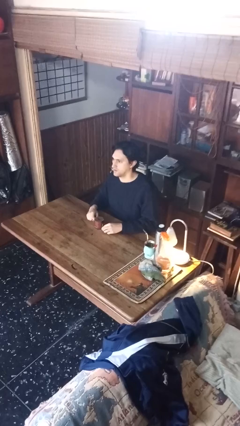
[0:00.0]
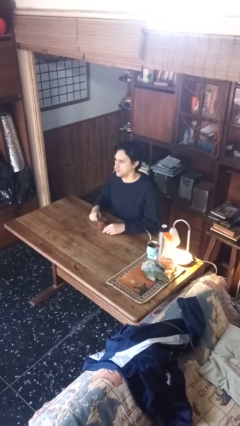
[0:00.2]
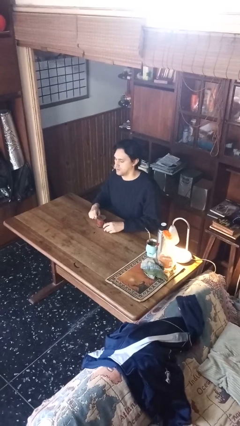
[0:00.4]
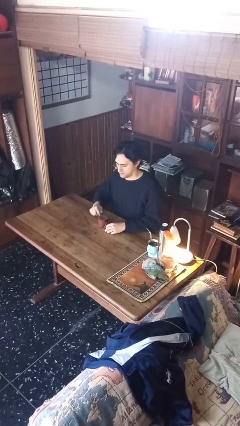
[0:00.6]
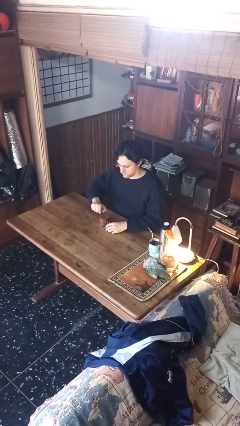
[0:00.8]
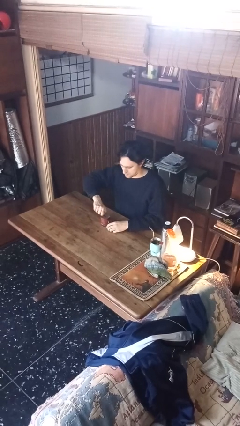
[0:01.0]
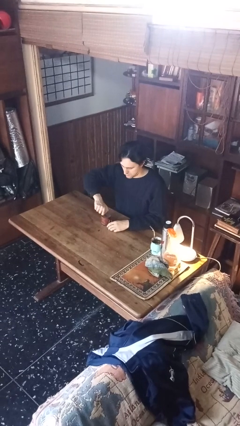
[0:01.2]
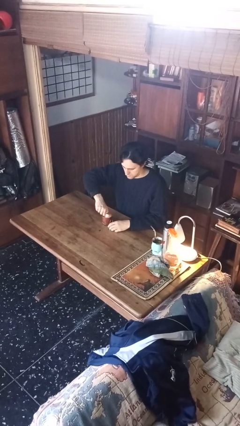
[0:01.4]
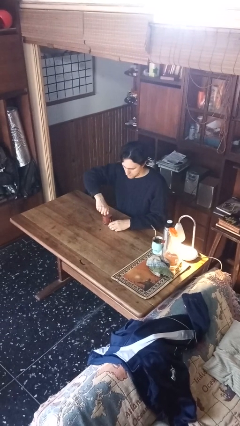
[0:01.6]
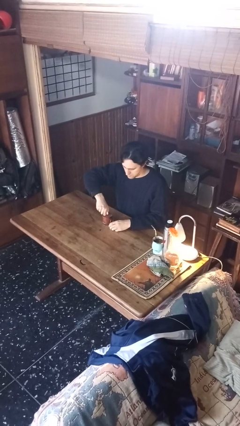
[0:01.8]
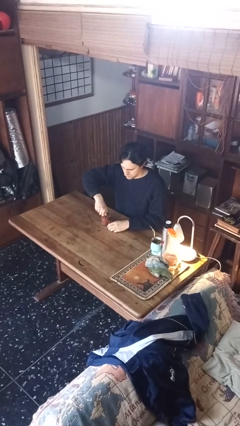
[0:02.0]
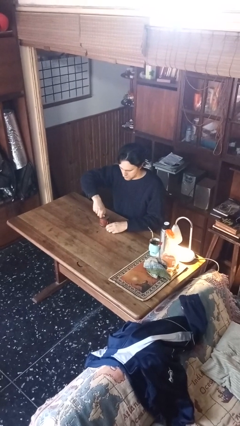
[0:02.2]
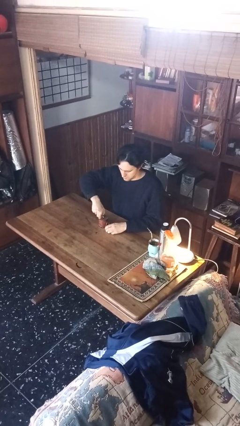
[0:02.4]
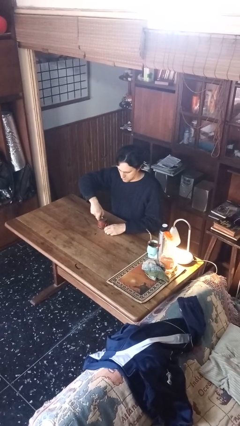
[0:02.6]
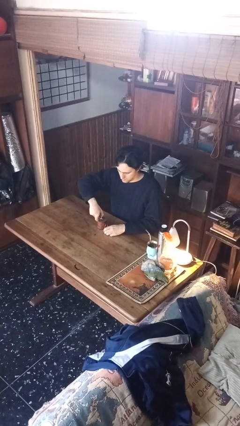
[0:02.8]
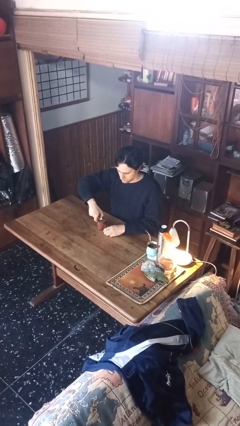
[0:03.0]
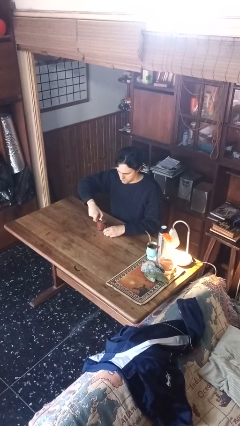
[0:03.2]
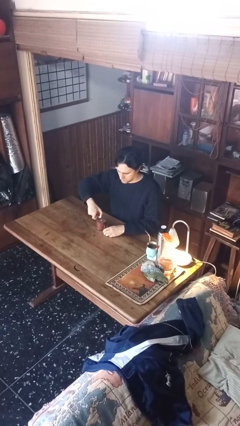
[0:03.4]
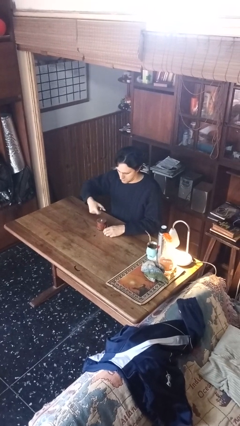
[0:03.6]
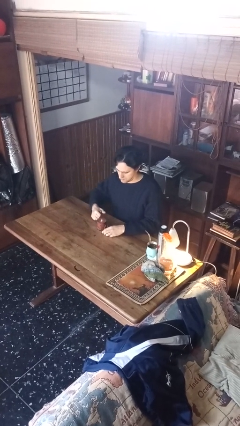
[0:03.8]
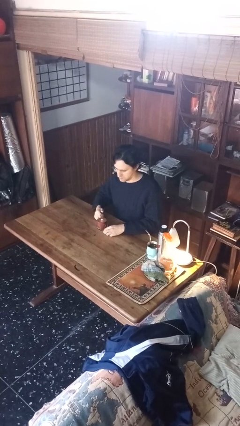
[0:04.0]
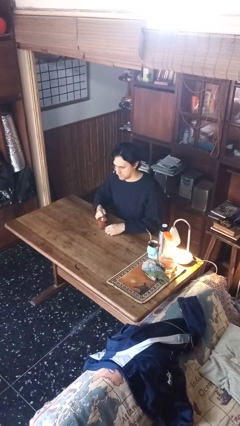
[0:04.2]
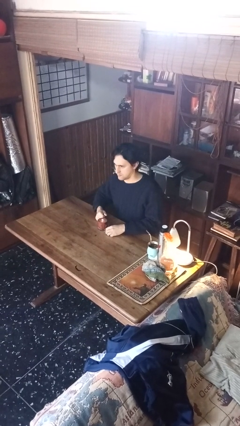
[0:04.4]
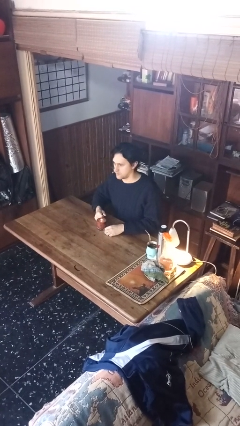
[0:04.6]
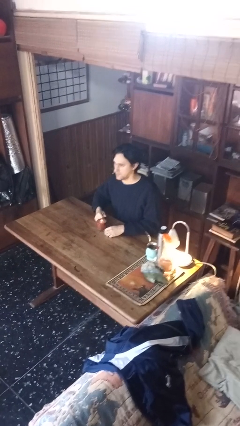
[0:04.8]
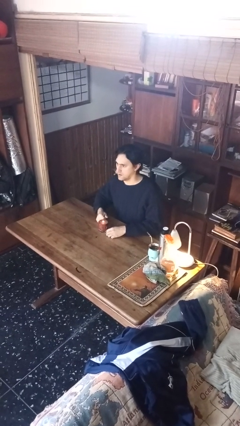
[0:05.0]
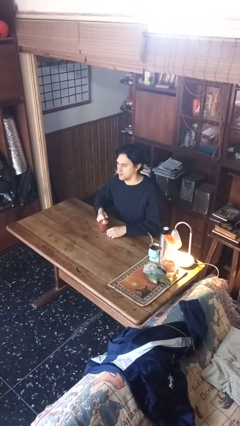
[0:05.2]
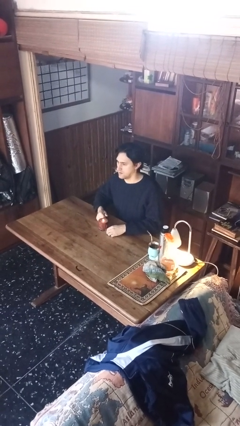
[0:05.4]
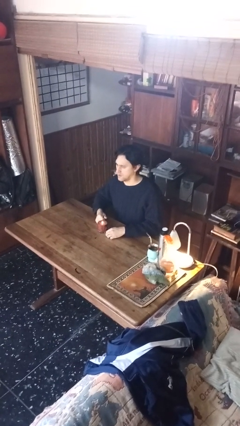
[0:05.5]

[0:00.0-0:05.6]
person lights candle

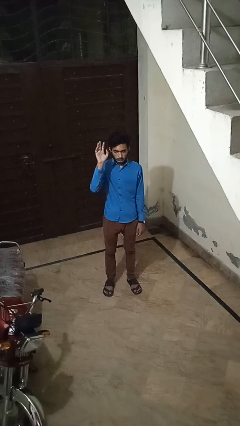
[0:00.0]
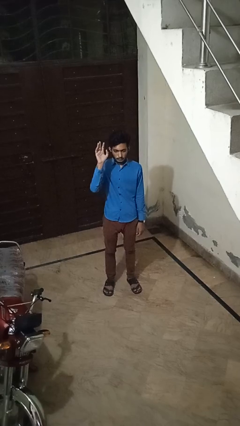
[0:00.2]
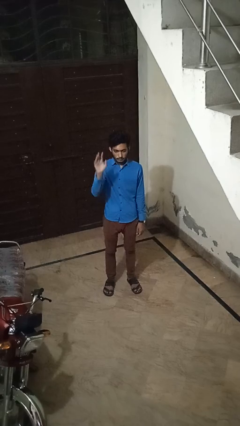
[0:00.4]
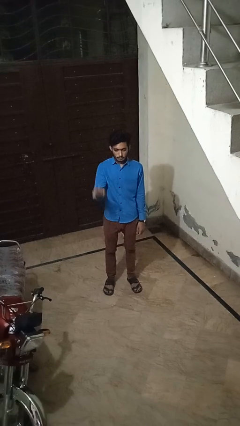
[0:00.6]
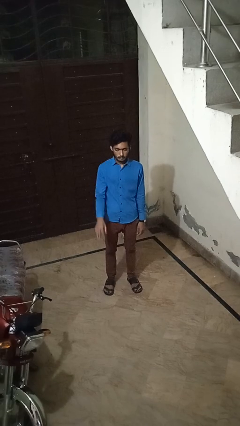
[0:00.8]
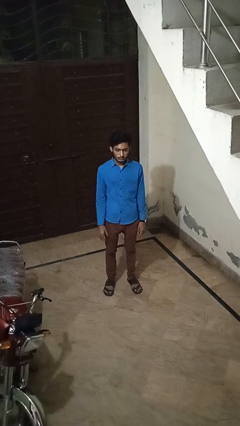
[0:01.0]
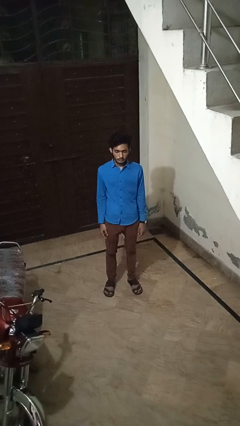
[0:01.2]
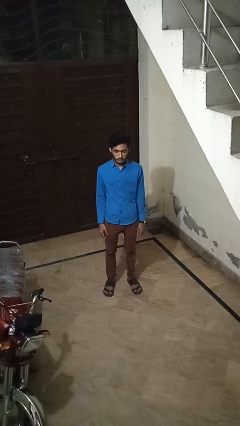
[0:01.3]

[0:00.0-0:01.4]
person gestures lower hand

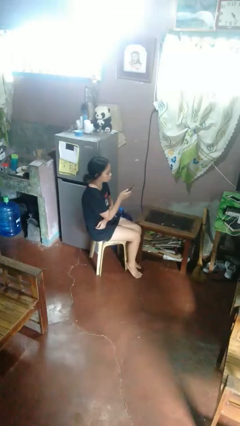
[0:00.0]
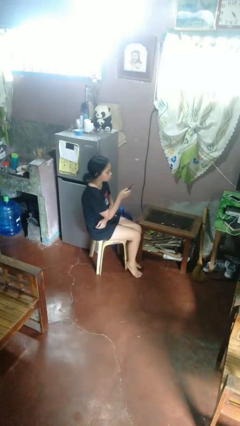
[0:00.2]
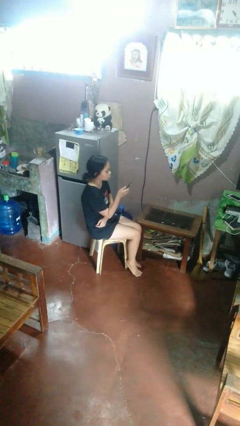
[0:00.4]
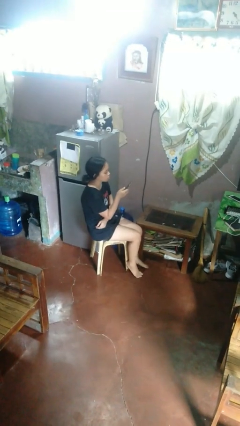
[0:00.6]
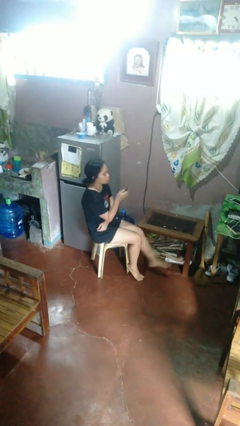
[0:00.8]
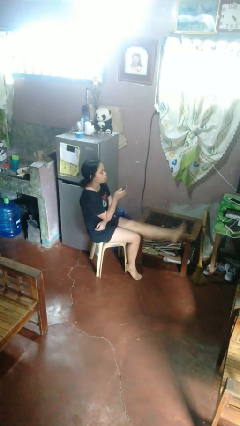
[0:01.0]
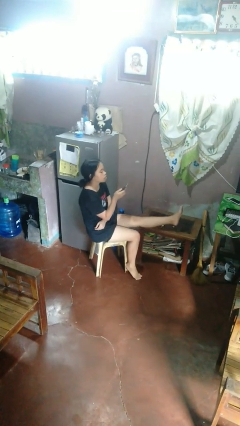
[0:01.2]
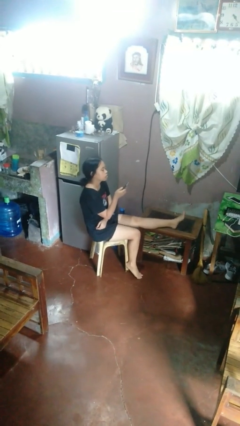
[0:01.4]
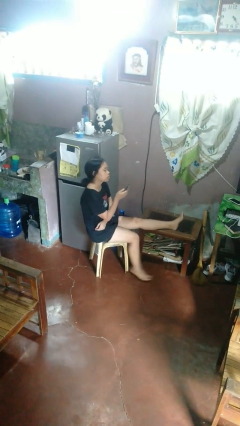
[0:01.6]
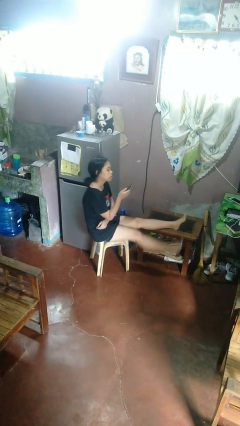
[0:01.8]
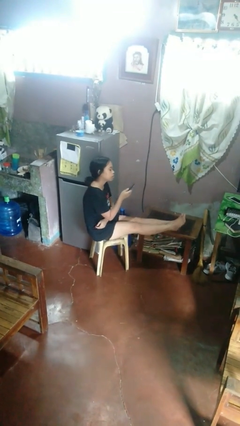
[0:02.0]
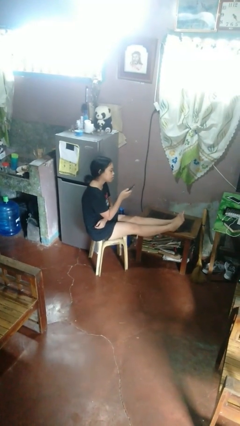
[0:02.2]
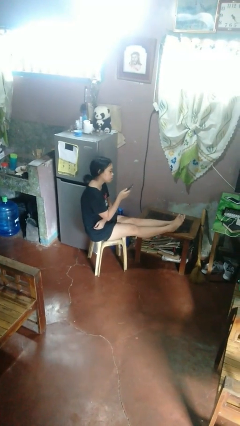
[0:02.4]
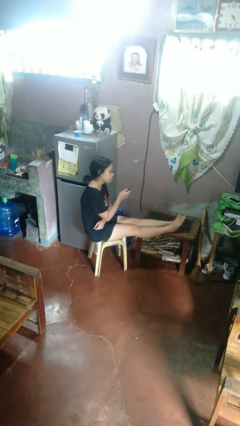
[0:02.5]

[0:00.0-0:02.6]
person puts feet up

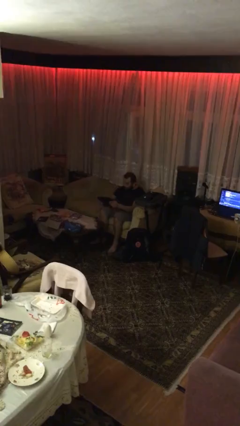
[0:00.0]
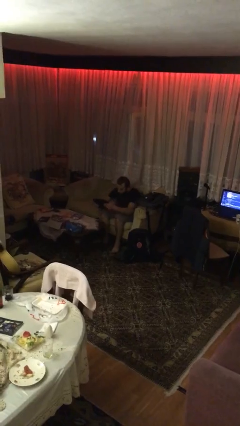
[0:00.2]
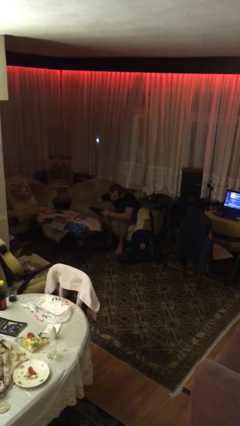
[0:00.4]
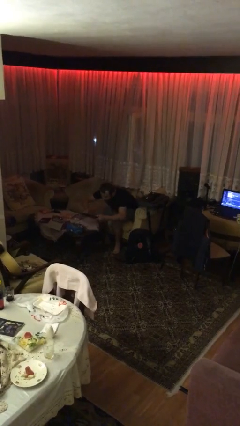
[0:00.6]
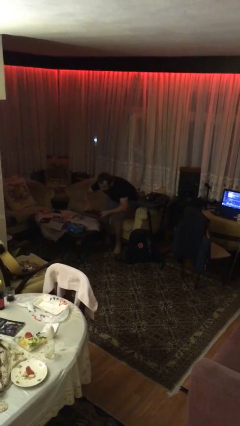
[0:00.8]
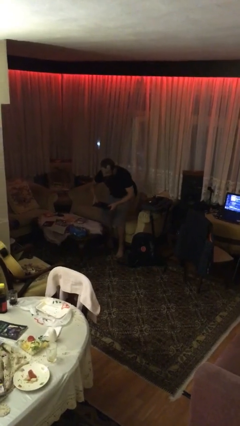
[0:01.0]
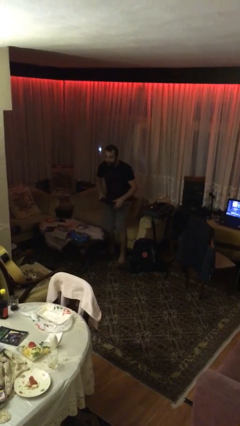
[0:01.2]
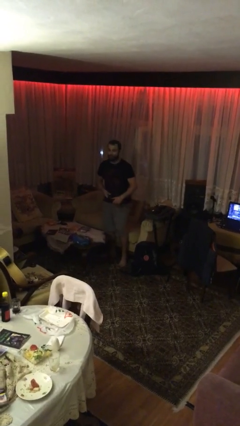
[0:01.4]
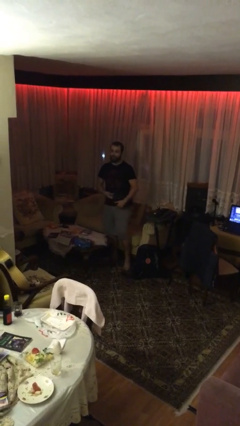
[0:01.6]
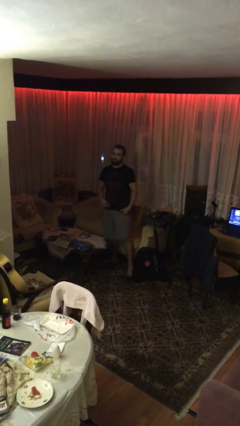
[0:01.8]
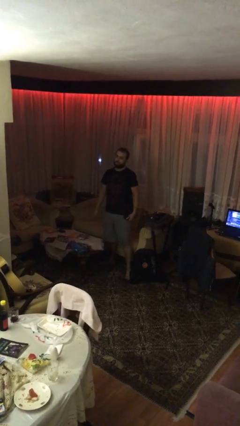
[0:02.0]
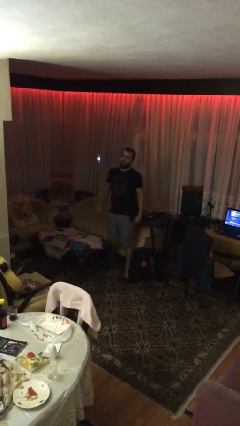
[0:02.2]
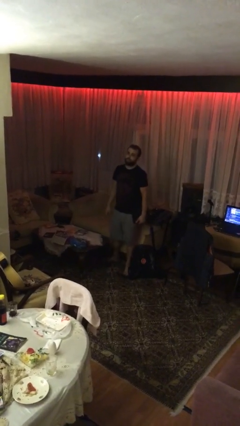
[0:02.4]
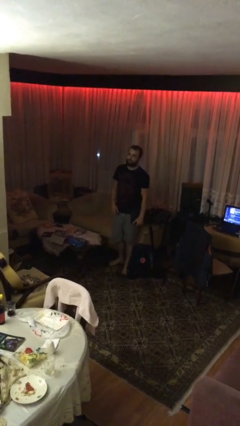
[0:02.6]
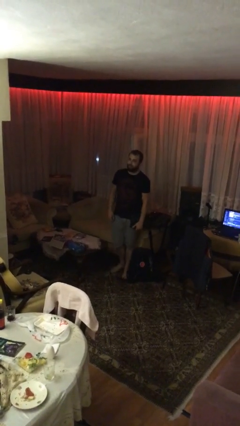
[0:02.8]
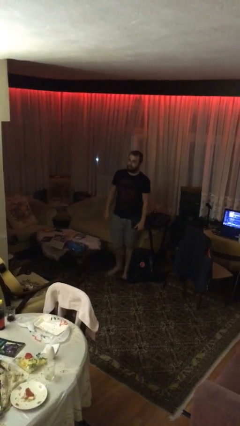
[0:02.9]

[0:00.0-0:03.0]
person stands up

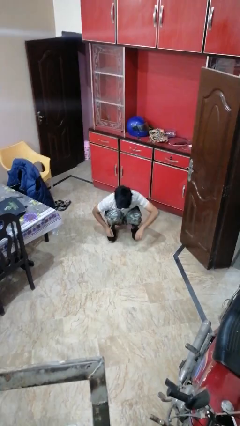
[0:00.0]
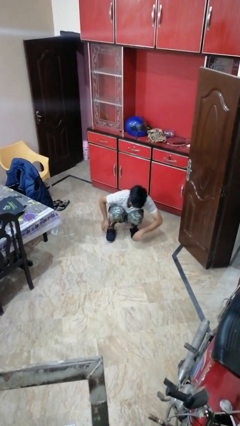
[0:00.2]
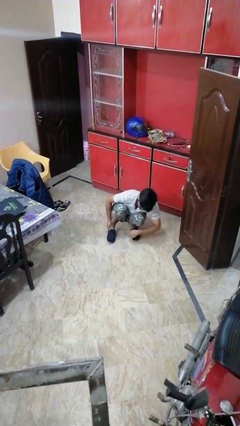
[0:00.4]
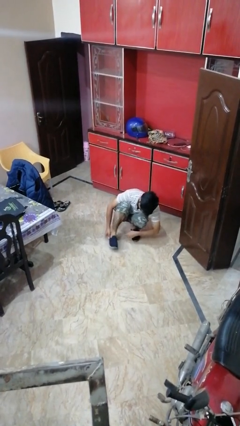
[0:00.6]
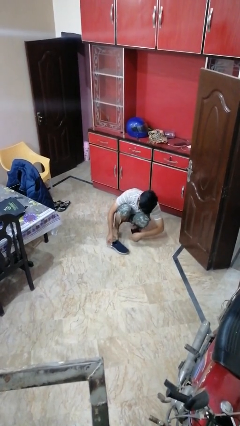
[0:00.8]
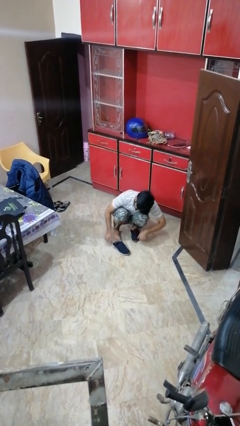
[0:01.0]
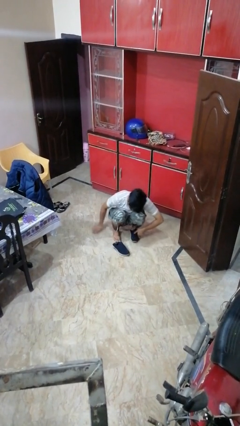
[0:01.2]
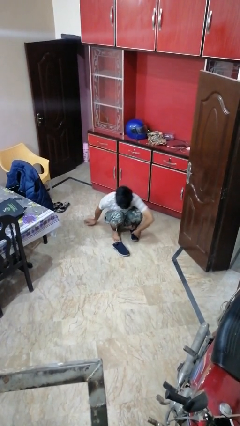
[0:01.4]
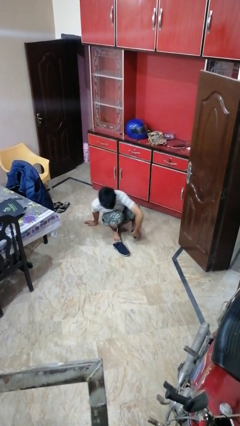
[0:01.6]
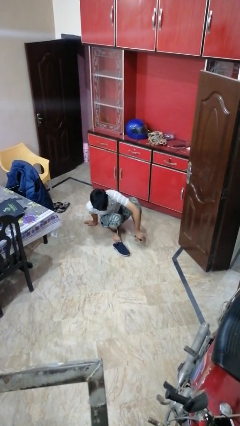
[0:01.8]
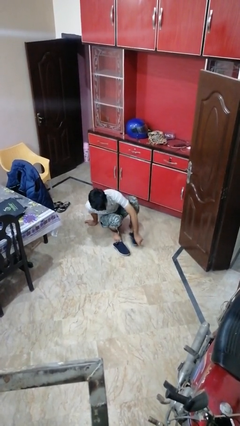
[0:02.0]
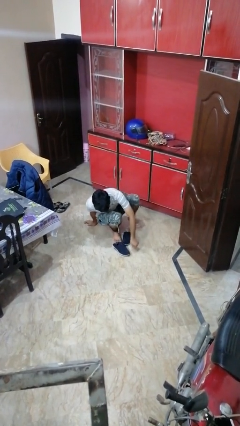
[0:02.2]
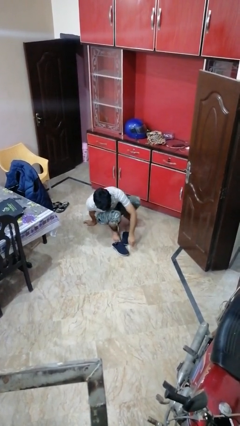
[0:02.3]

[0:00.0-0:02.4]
person takes off shoes

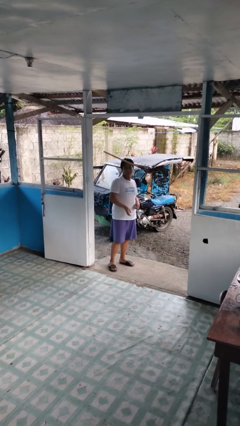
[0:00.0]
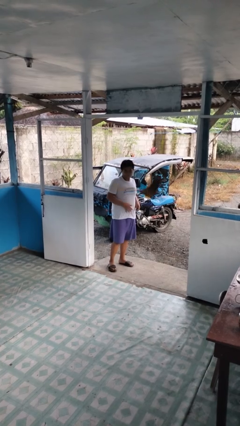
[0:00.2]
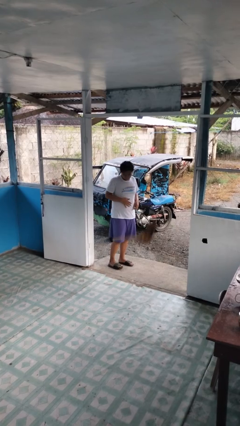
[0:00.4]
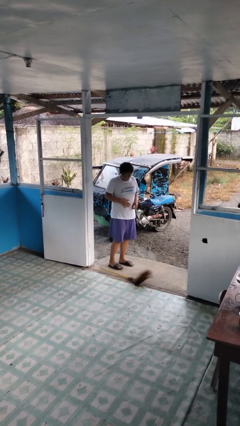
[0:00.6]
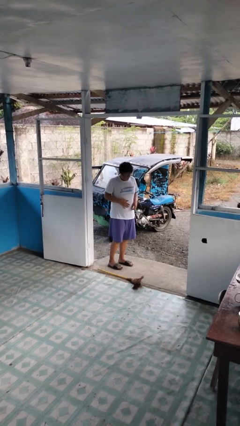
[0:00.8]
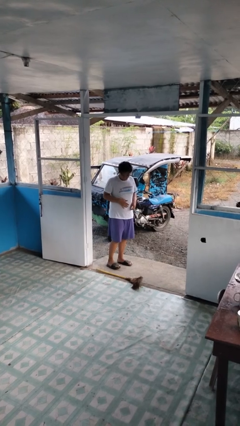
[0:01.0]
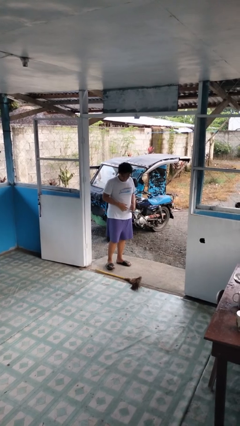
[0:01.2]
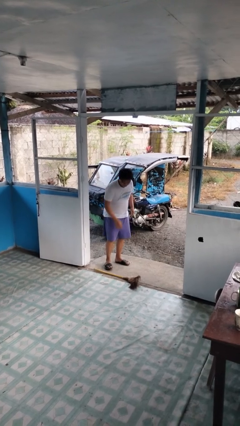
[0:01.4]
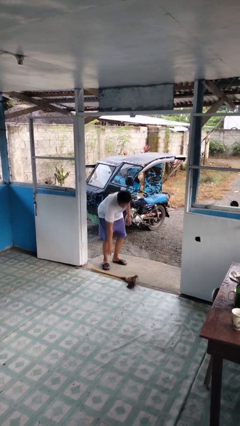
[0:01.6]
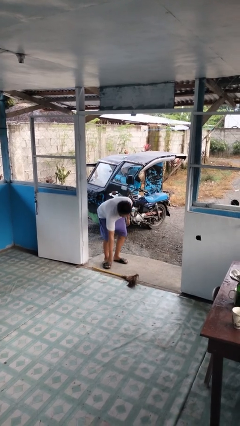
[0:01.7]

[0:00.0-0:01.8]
person throws object into air

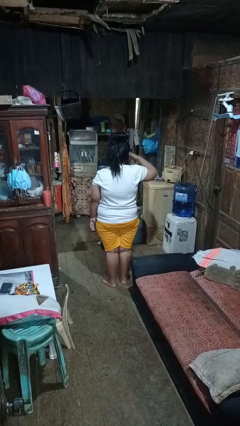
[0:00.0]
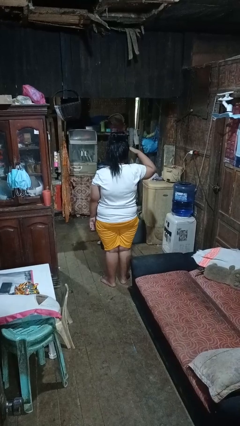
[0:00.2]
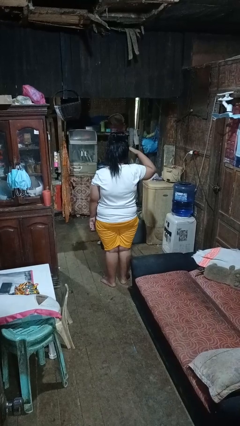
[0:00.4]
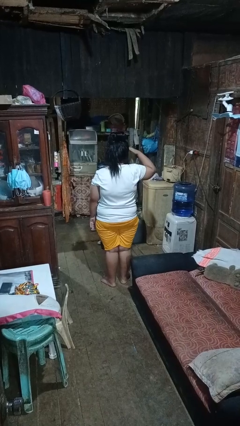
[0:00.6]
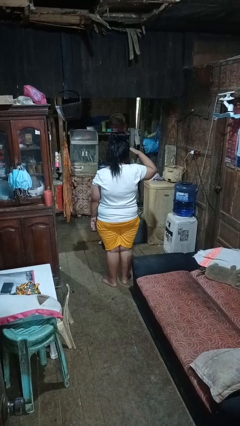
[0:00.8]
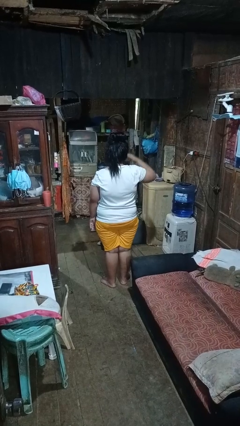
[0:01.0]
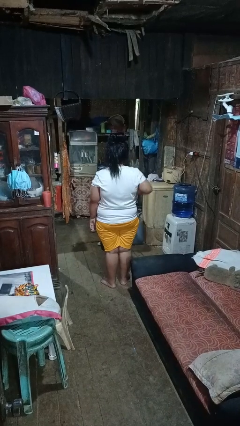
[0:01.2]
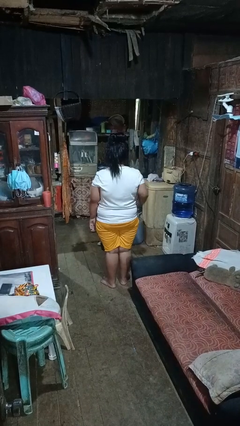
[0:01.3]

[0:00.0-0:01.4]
person salutes
